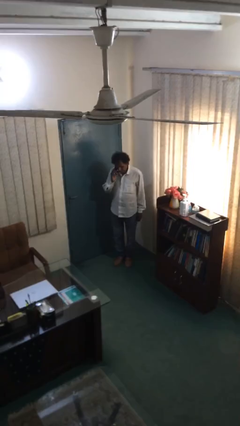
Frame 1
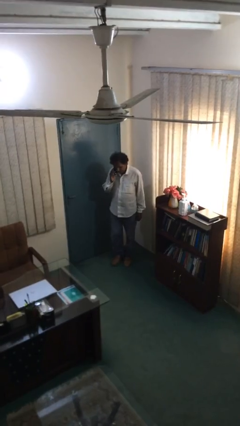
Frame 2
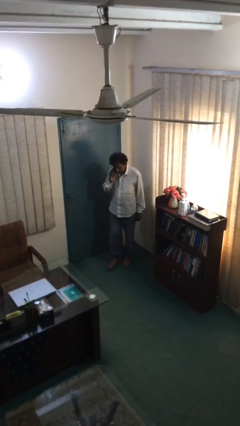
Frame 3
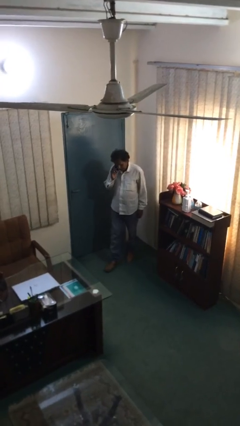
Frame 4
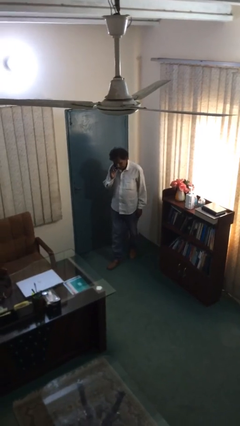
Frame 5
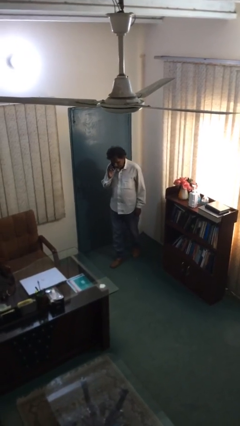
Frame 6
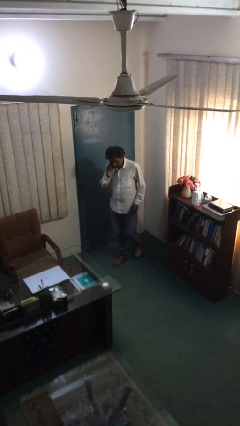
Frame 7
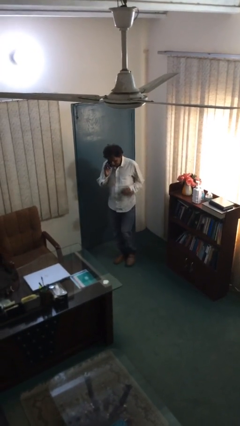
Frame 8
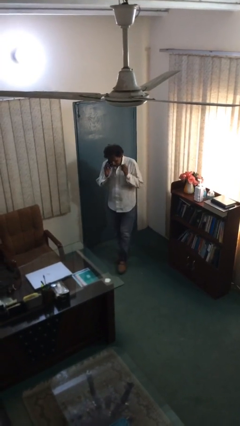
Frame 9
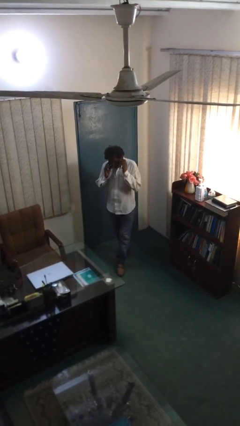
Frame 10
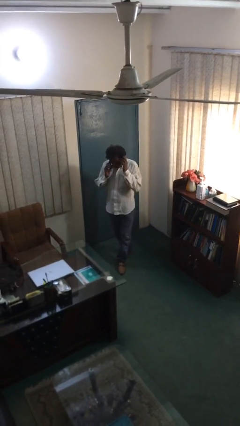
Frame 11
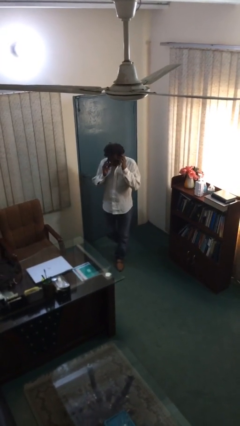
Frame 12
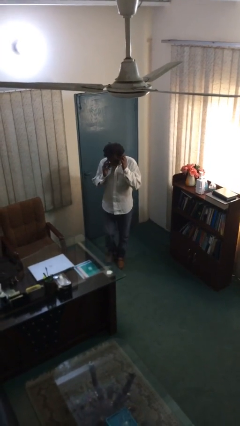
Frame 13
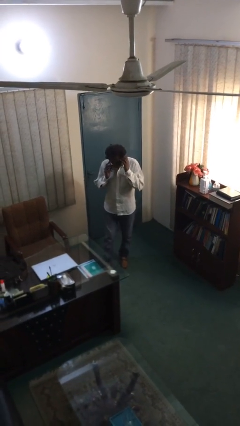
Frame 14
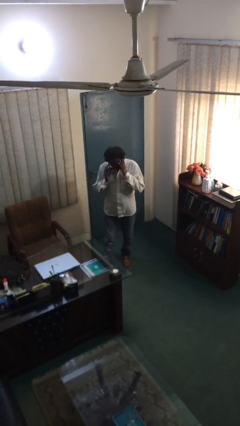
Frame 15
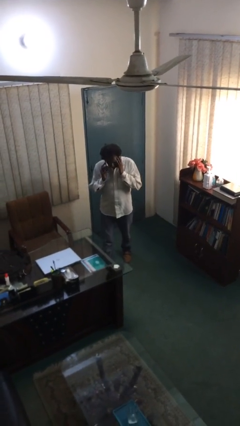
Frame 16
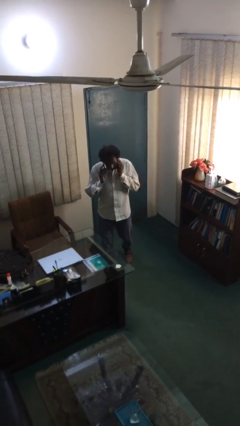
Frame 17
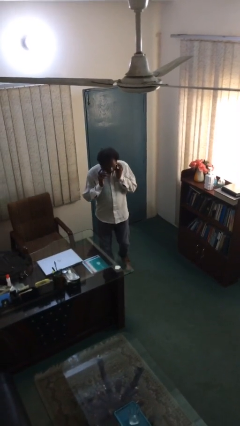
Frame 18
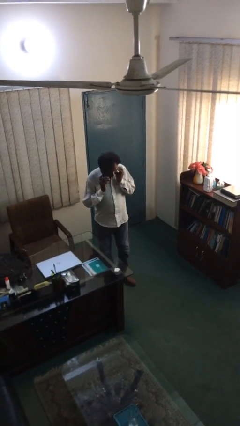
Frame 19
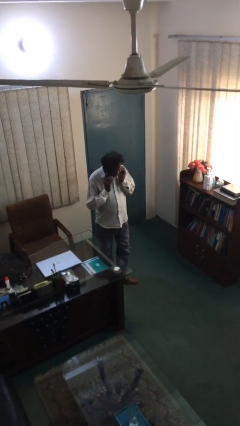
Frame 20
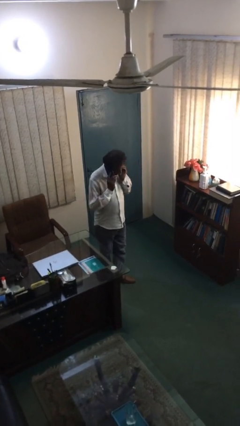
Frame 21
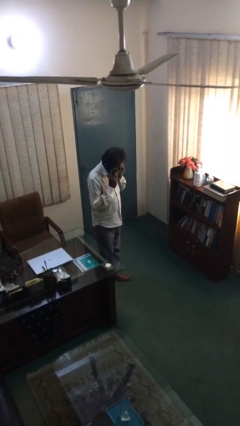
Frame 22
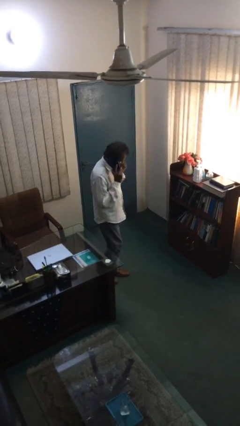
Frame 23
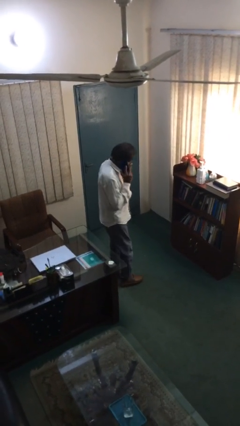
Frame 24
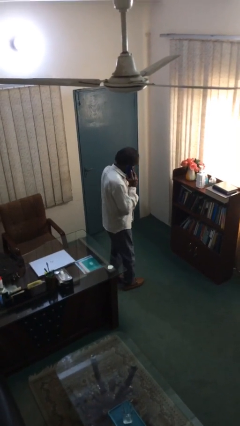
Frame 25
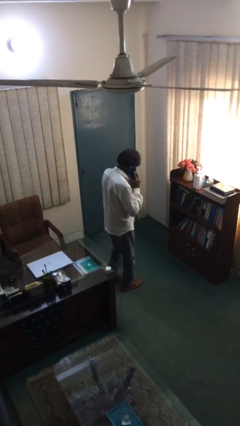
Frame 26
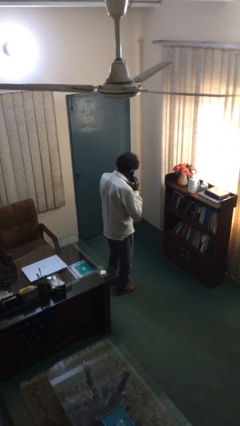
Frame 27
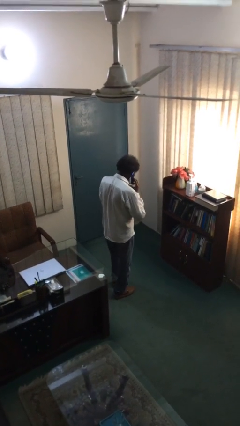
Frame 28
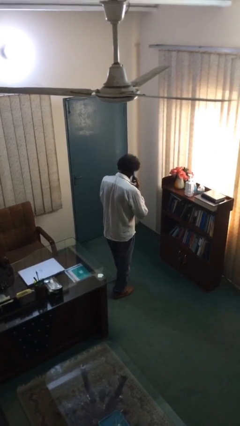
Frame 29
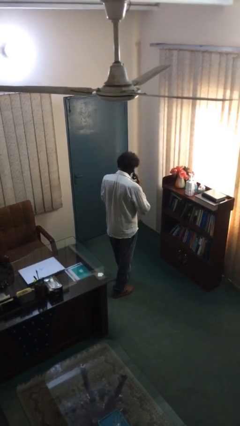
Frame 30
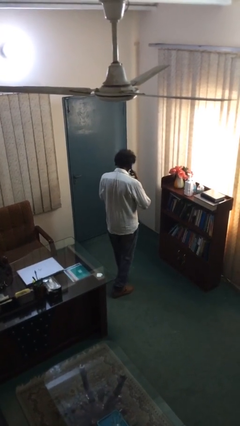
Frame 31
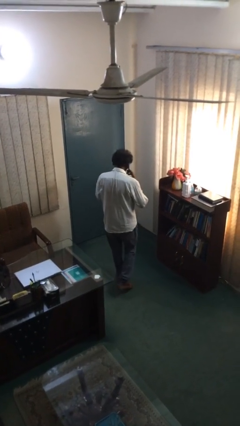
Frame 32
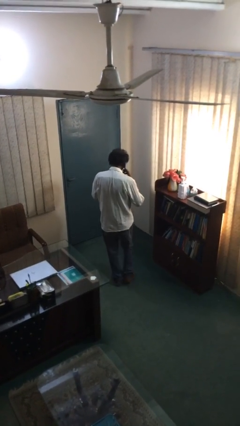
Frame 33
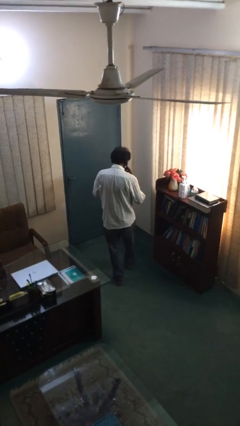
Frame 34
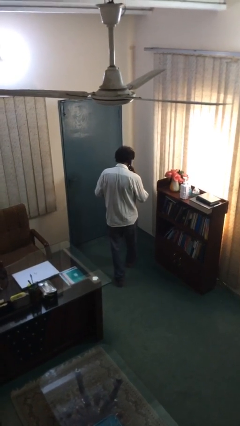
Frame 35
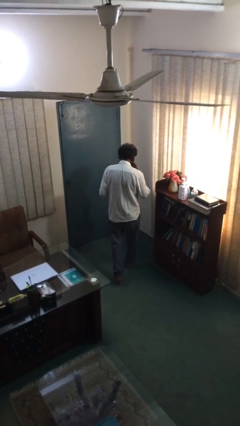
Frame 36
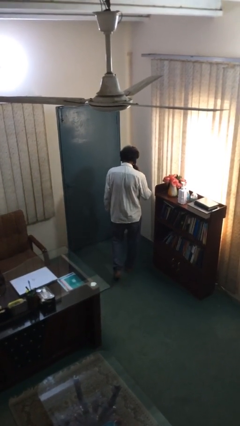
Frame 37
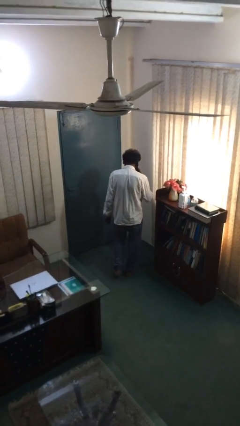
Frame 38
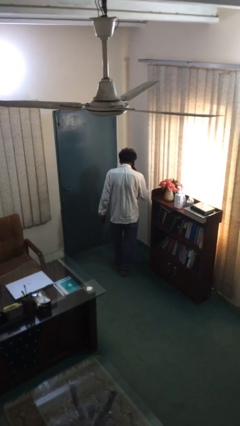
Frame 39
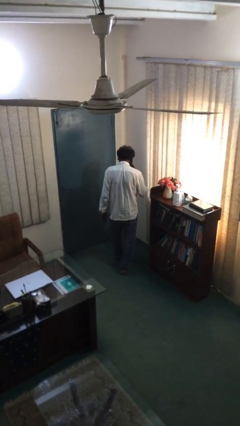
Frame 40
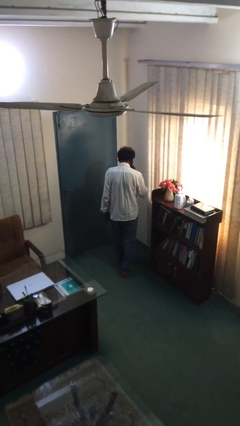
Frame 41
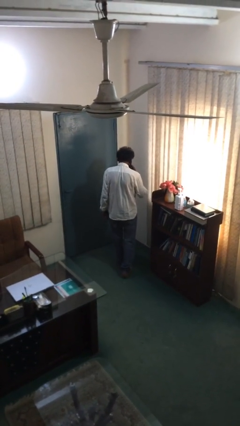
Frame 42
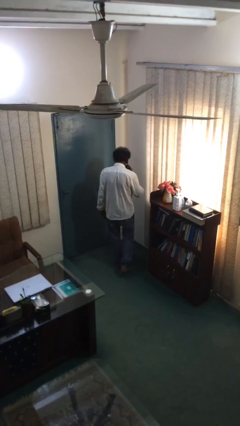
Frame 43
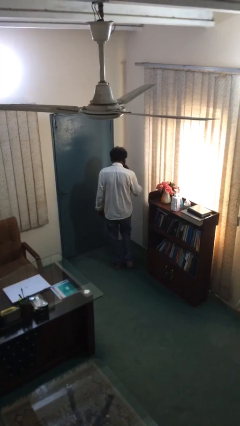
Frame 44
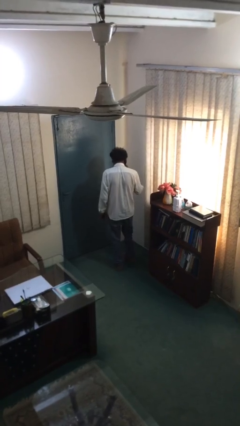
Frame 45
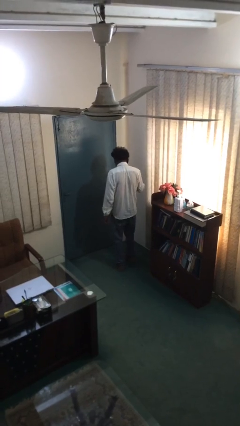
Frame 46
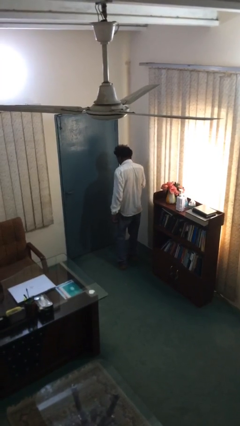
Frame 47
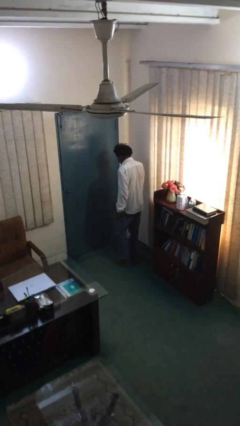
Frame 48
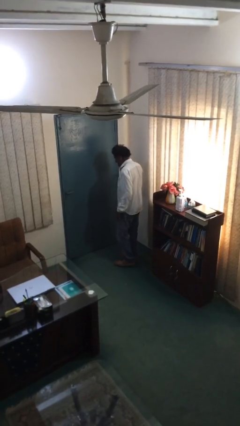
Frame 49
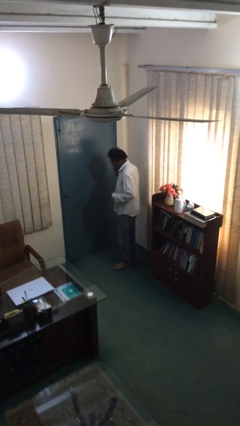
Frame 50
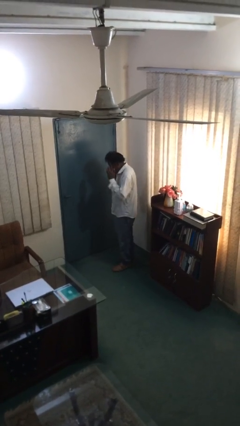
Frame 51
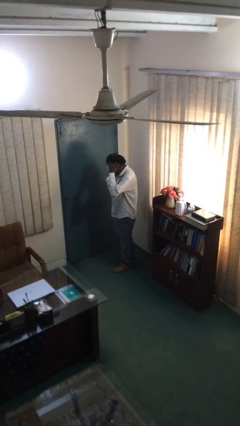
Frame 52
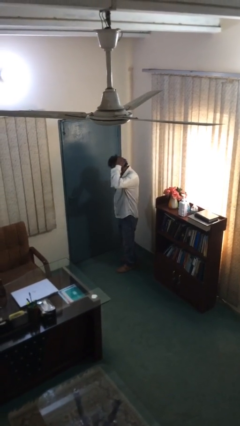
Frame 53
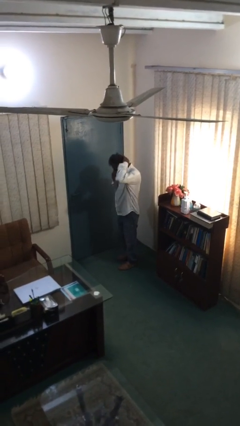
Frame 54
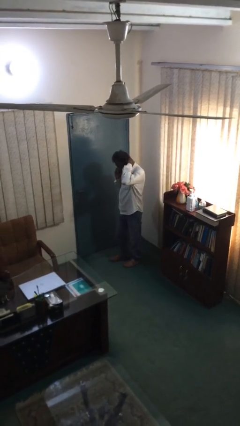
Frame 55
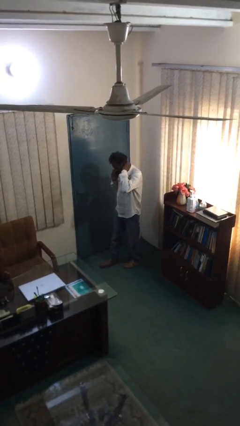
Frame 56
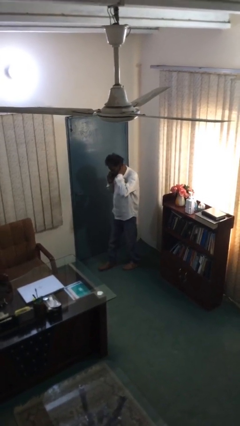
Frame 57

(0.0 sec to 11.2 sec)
person talks on phone

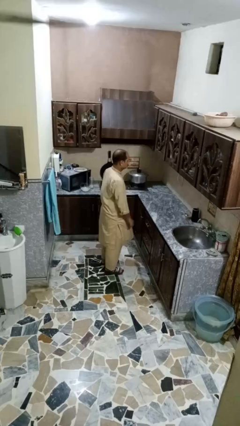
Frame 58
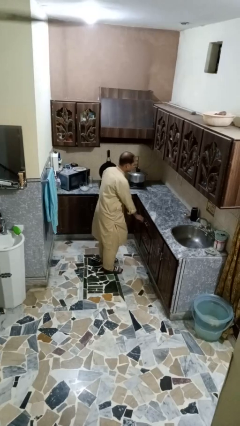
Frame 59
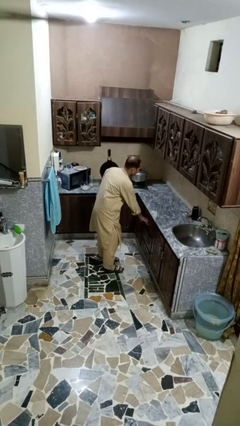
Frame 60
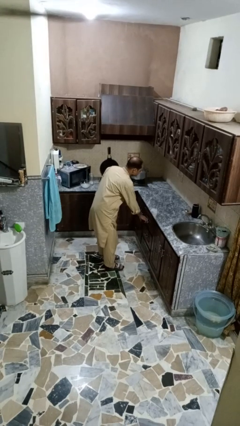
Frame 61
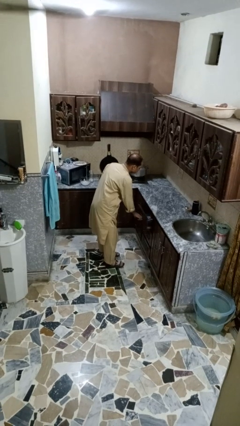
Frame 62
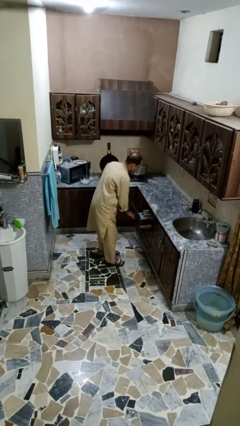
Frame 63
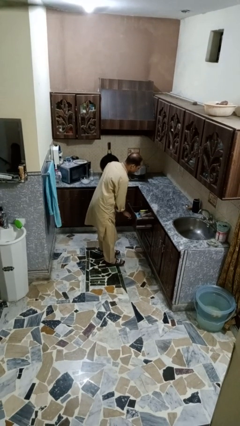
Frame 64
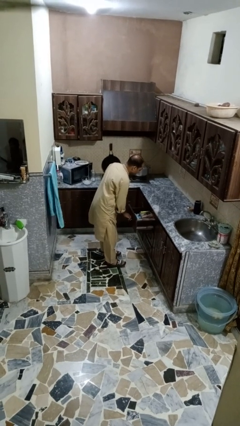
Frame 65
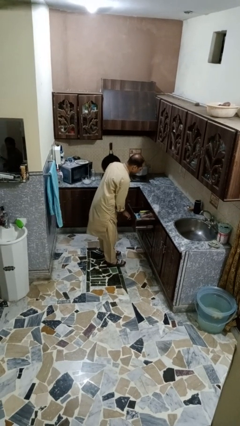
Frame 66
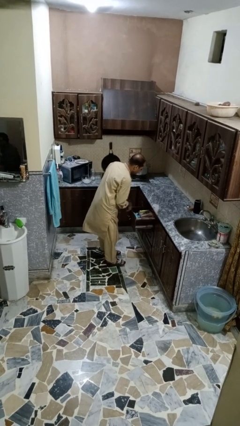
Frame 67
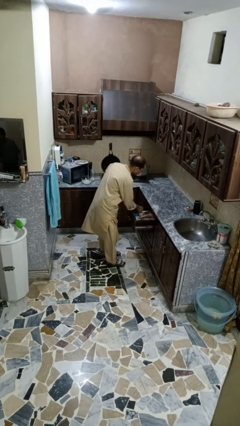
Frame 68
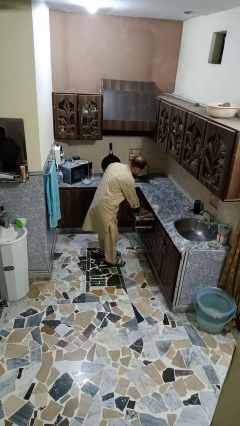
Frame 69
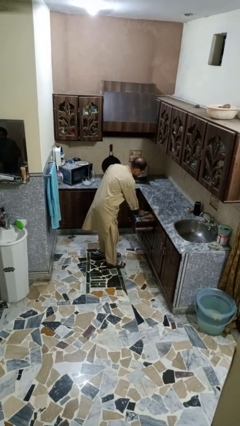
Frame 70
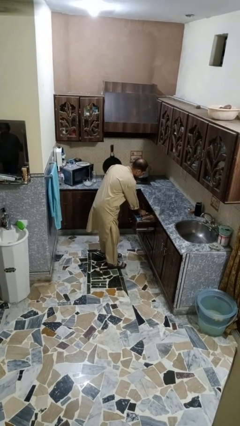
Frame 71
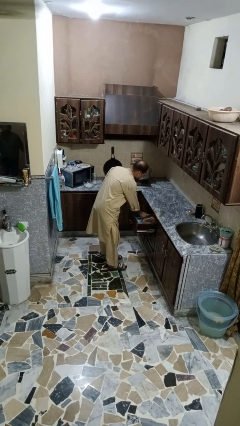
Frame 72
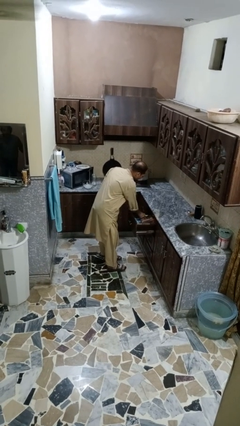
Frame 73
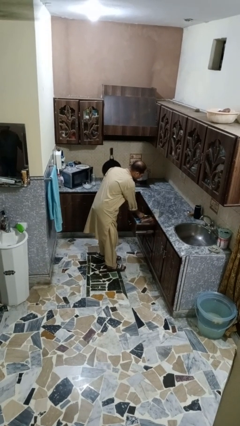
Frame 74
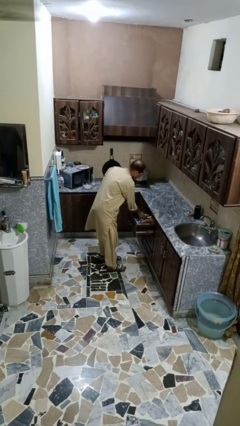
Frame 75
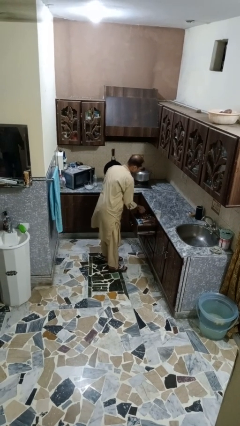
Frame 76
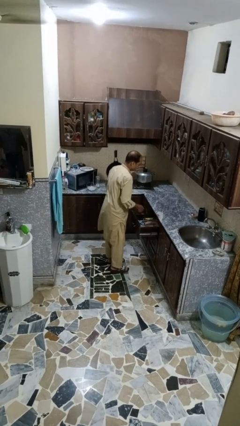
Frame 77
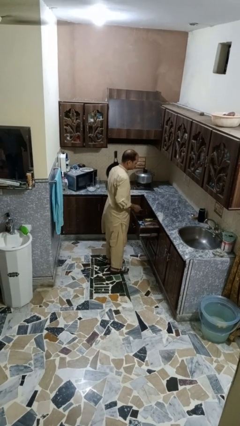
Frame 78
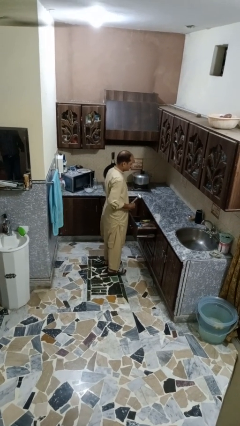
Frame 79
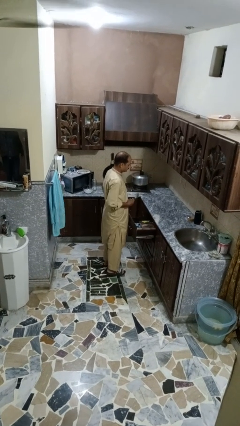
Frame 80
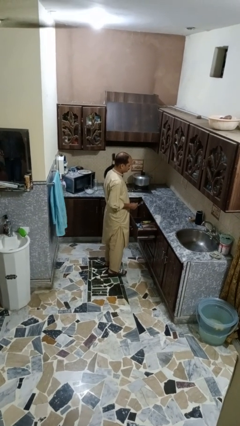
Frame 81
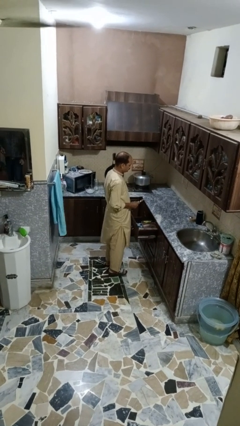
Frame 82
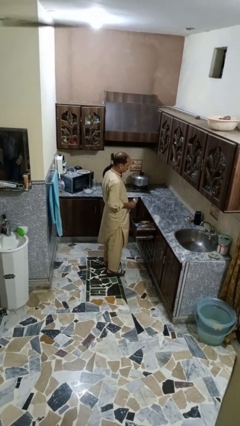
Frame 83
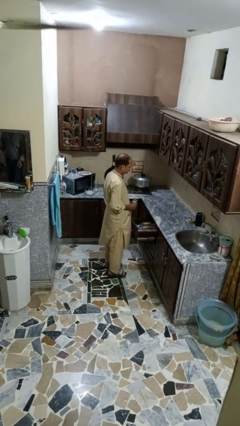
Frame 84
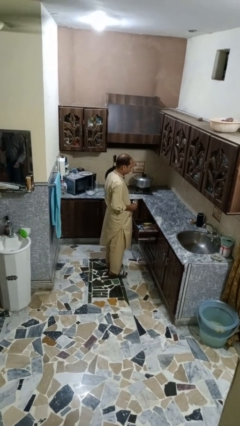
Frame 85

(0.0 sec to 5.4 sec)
person takes object from kitchen drawer

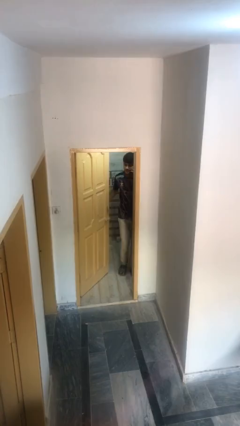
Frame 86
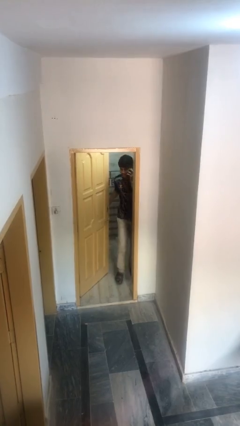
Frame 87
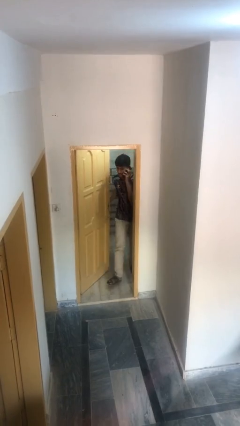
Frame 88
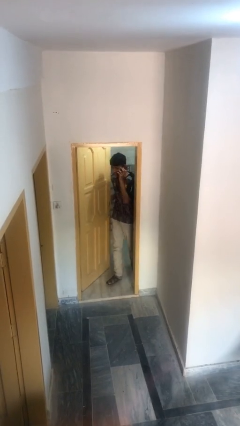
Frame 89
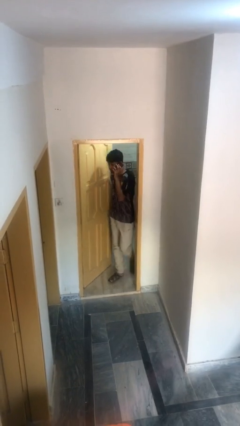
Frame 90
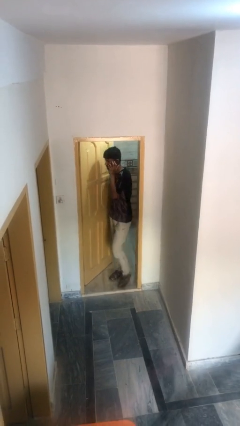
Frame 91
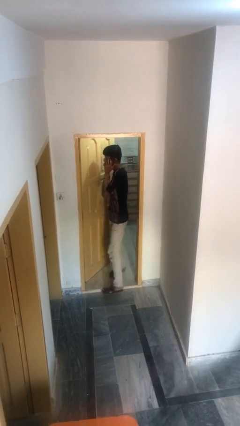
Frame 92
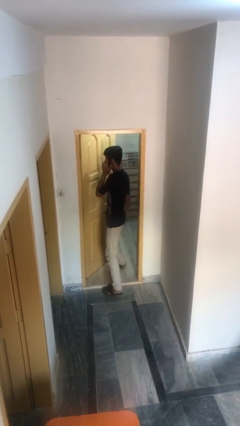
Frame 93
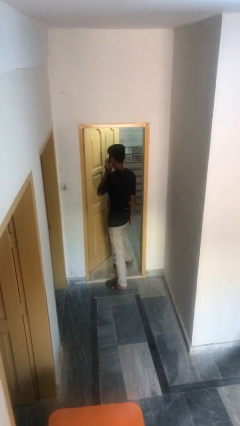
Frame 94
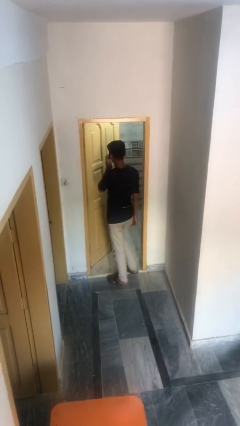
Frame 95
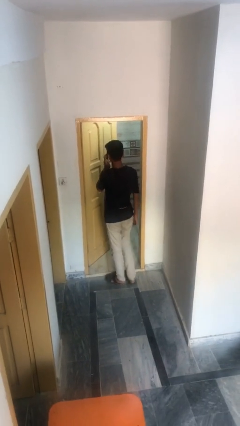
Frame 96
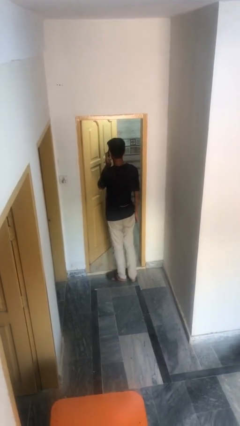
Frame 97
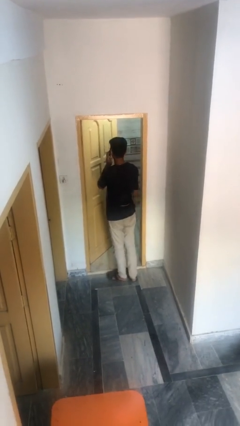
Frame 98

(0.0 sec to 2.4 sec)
person enters scene through structure
